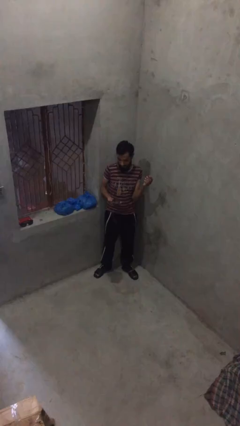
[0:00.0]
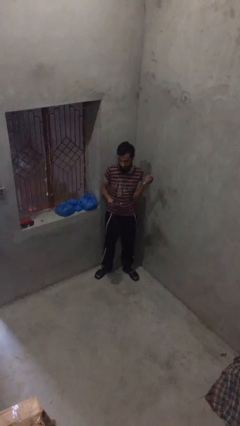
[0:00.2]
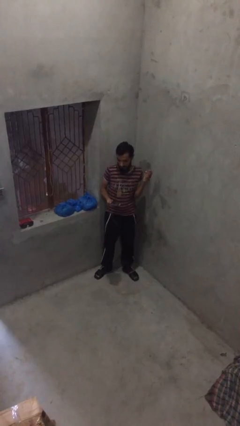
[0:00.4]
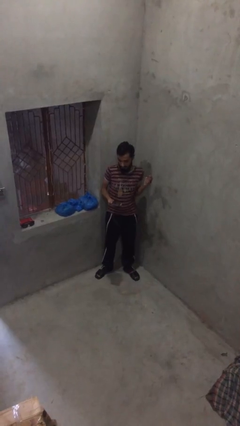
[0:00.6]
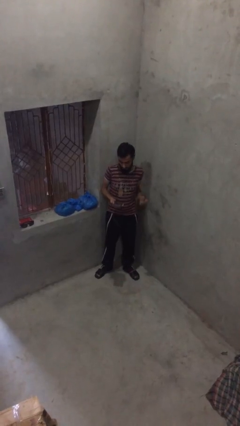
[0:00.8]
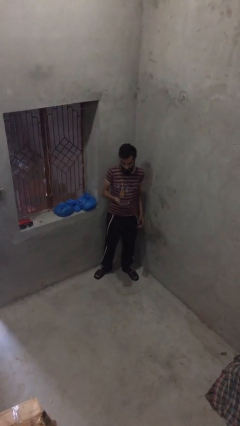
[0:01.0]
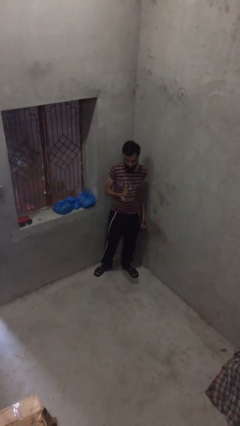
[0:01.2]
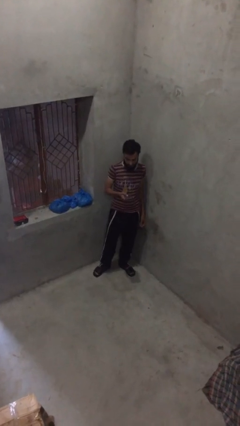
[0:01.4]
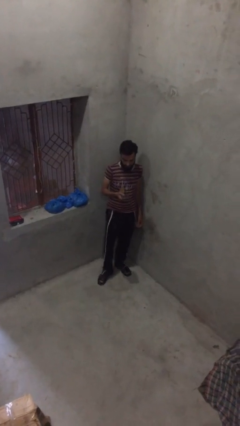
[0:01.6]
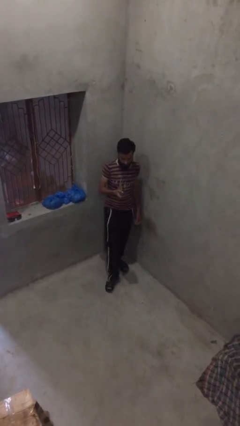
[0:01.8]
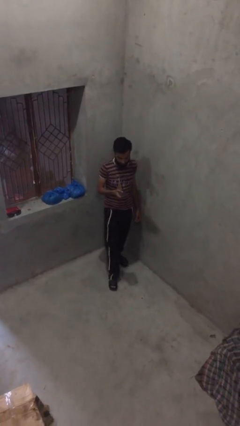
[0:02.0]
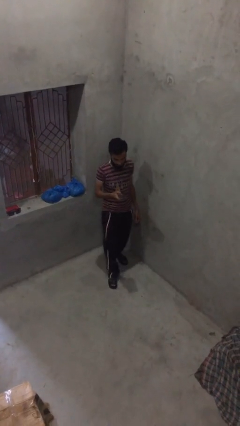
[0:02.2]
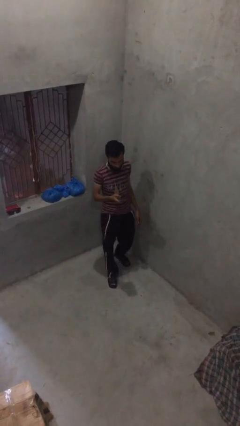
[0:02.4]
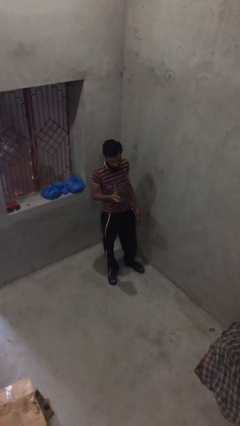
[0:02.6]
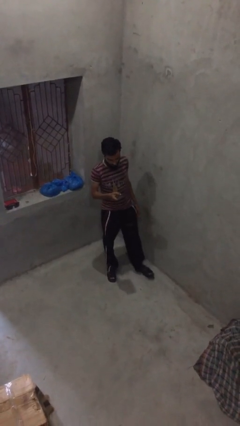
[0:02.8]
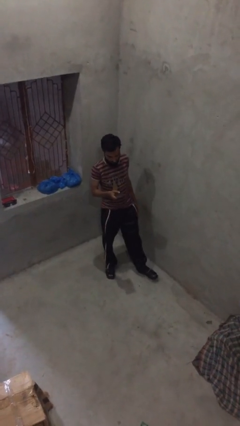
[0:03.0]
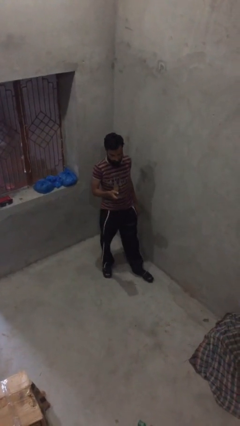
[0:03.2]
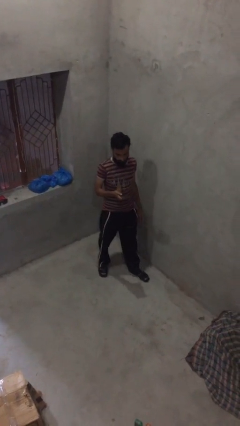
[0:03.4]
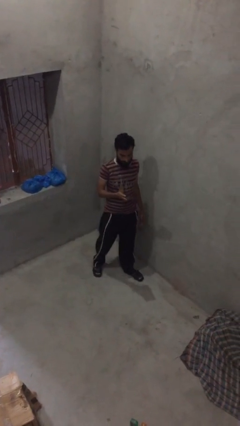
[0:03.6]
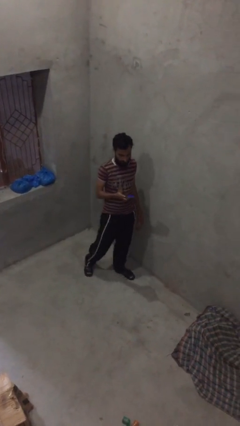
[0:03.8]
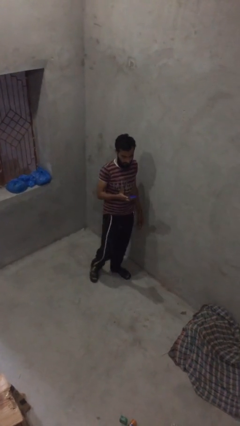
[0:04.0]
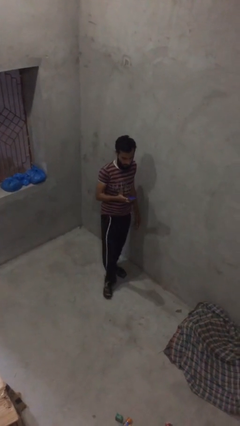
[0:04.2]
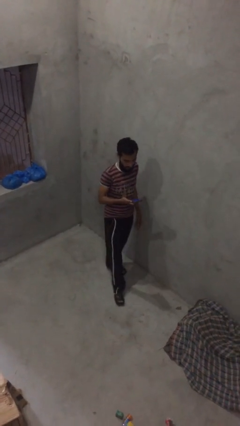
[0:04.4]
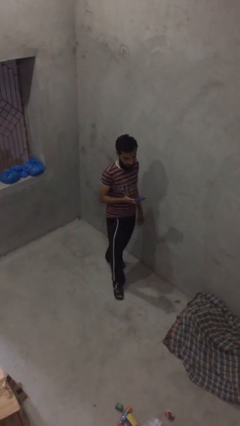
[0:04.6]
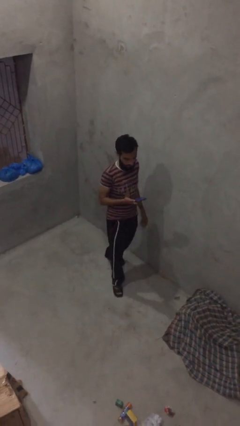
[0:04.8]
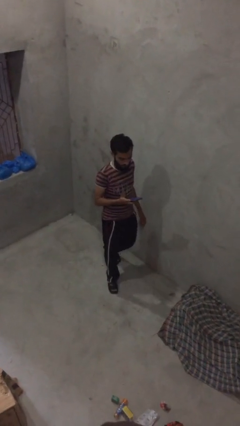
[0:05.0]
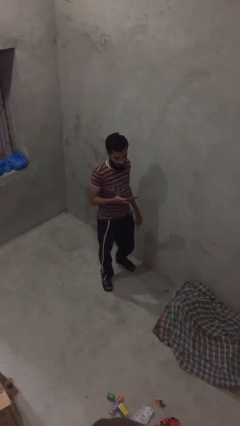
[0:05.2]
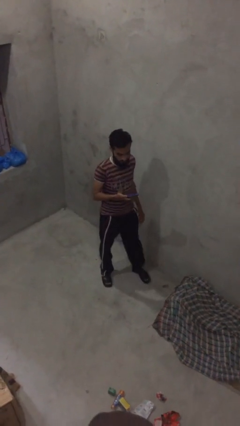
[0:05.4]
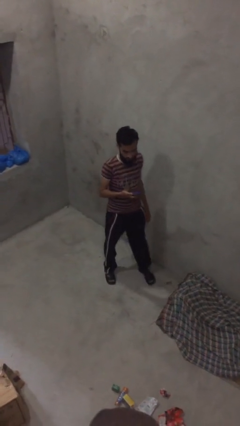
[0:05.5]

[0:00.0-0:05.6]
person texts on phone

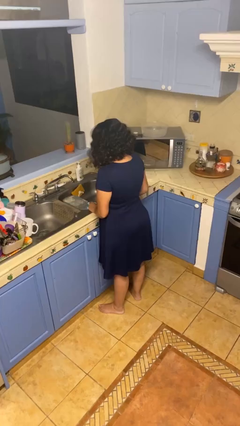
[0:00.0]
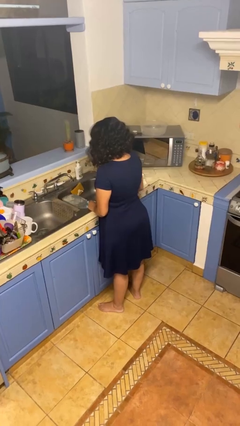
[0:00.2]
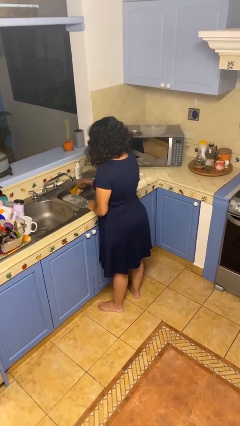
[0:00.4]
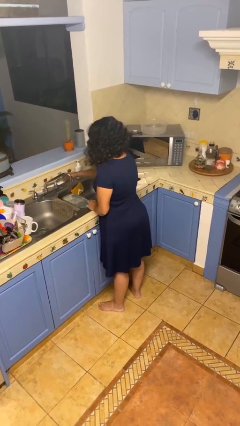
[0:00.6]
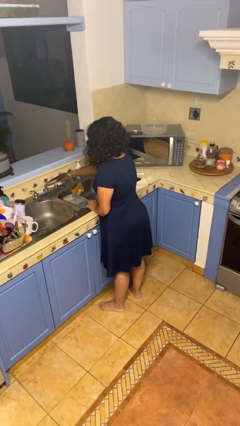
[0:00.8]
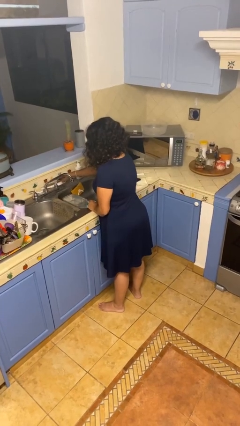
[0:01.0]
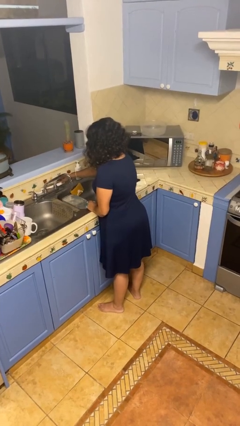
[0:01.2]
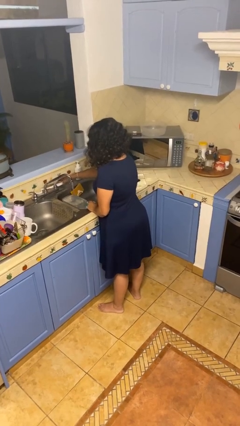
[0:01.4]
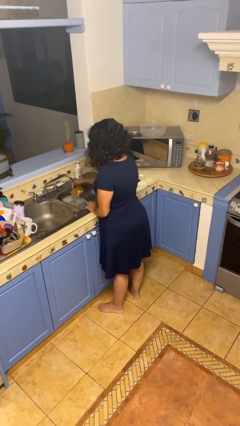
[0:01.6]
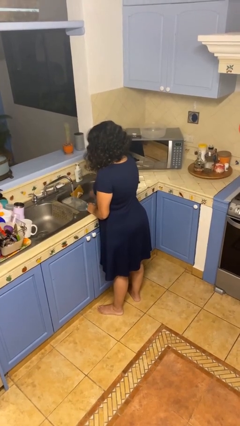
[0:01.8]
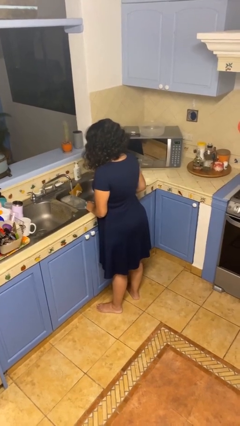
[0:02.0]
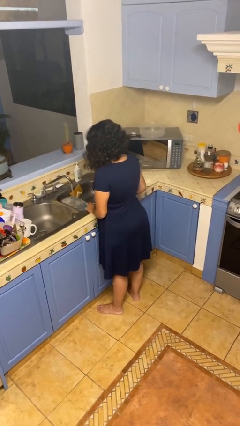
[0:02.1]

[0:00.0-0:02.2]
person turns on faucet

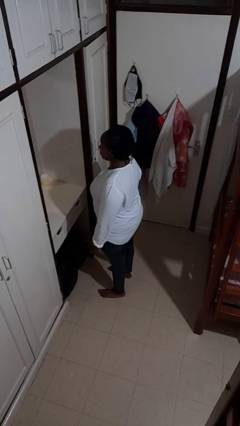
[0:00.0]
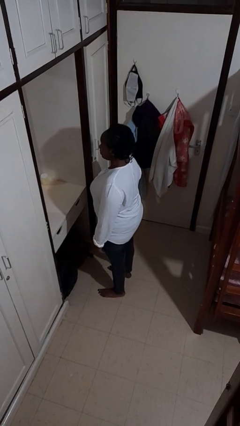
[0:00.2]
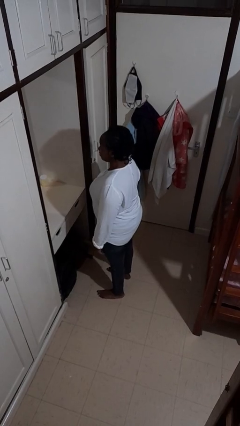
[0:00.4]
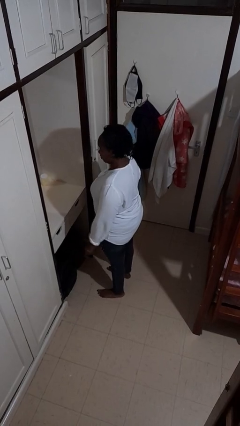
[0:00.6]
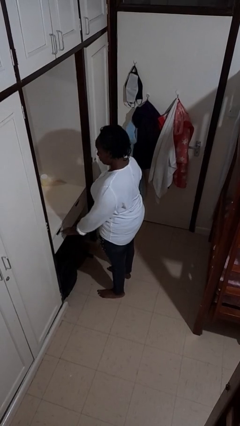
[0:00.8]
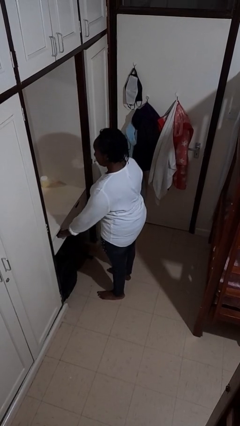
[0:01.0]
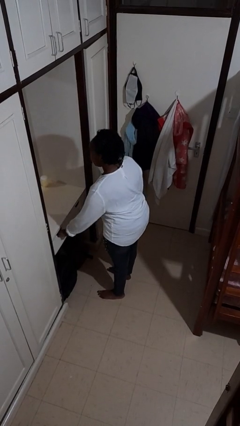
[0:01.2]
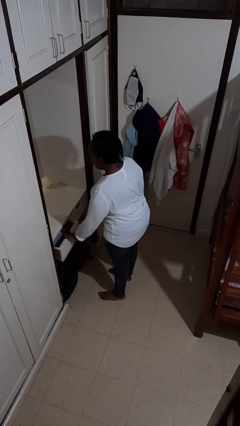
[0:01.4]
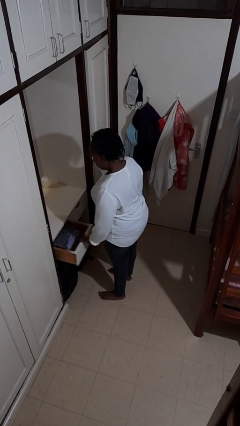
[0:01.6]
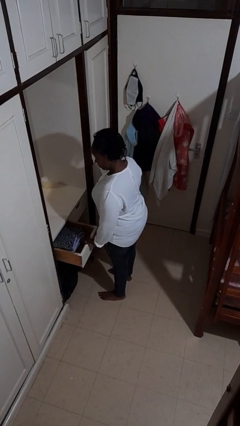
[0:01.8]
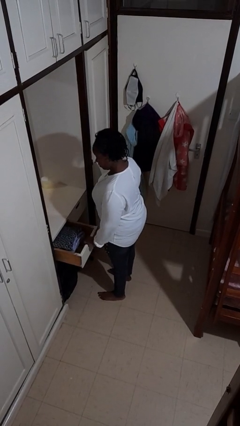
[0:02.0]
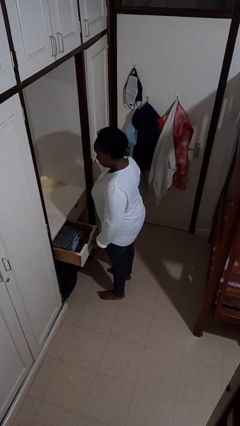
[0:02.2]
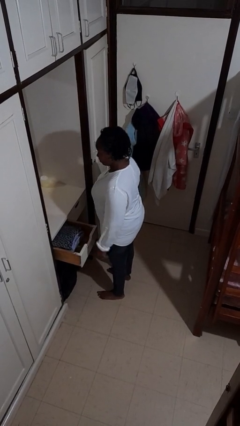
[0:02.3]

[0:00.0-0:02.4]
person opens dresser drawer

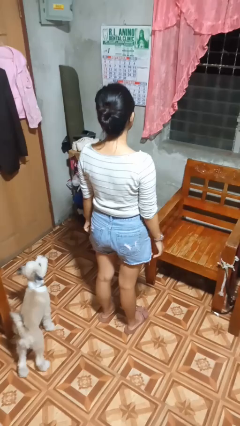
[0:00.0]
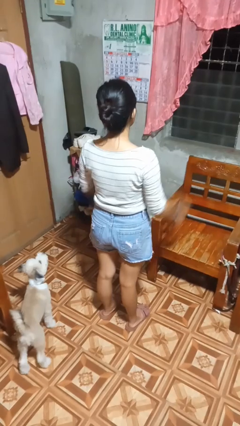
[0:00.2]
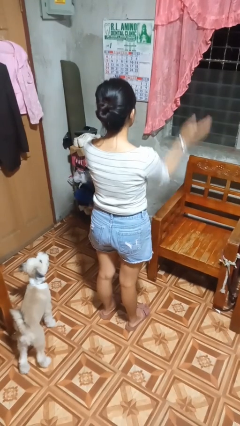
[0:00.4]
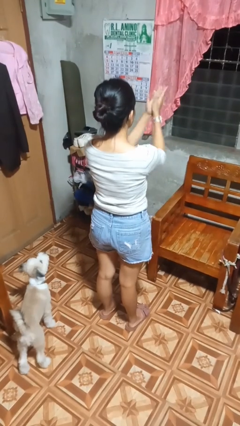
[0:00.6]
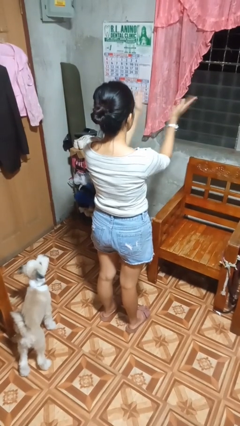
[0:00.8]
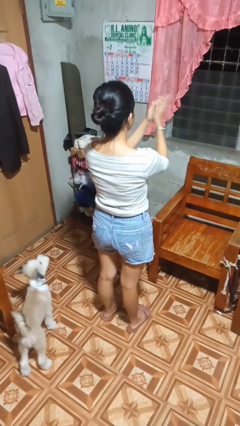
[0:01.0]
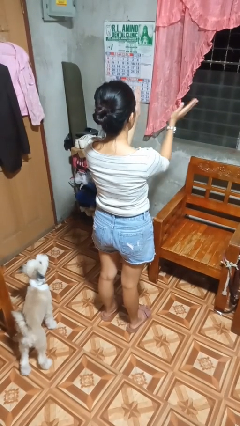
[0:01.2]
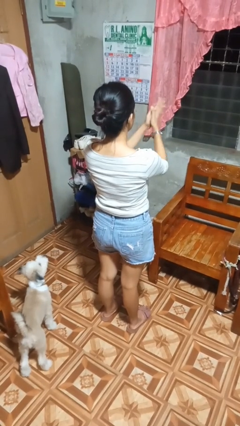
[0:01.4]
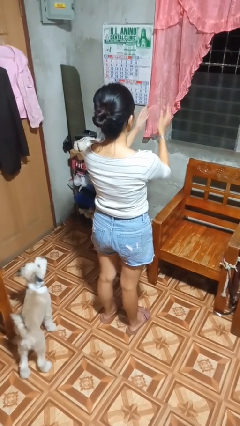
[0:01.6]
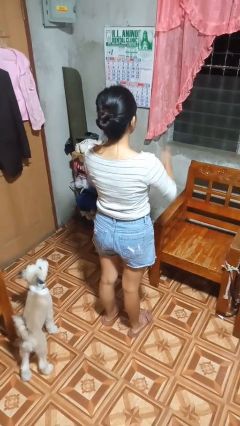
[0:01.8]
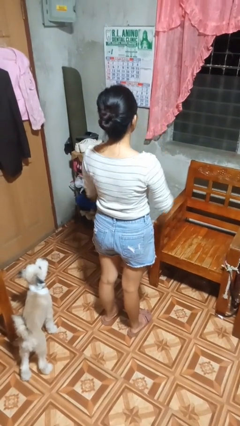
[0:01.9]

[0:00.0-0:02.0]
person claps hands

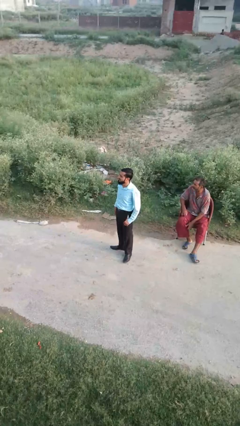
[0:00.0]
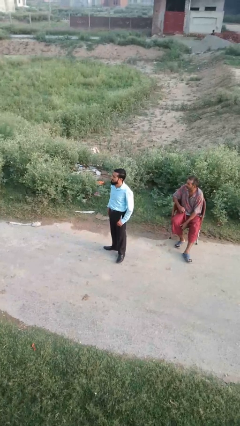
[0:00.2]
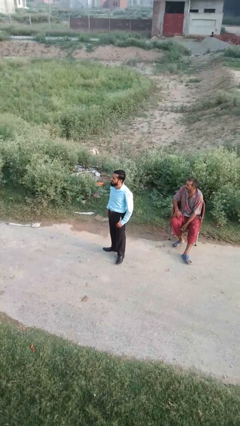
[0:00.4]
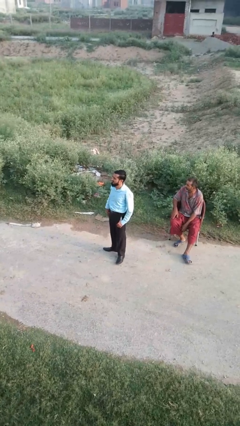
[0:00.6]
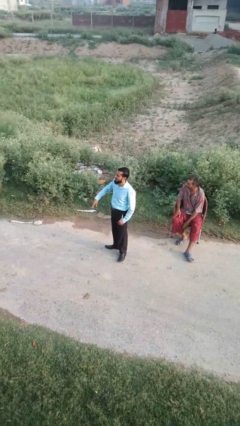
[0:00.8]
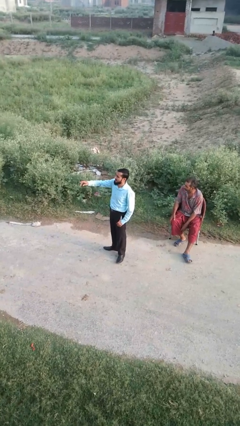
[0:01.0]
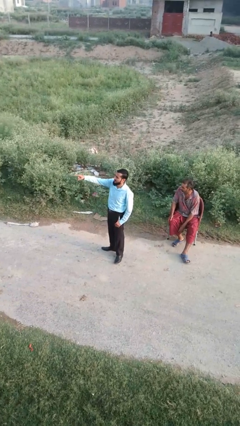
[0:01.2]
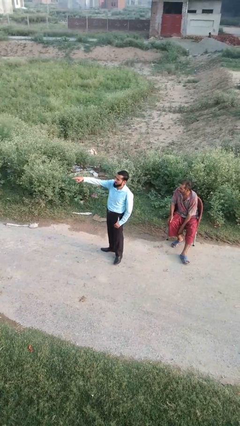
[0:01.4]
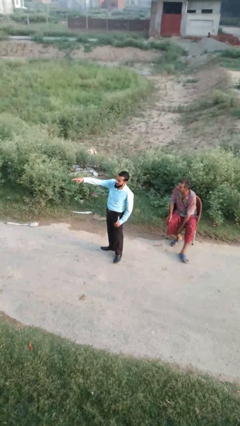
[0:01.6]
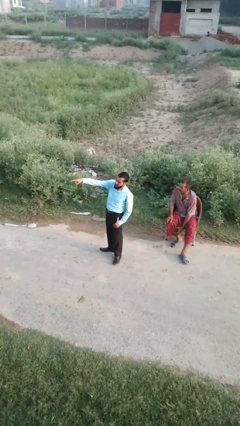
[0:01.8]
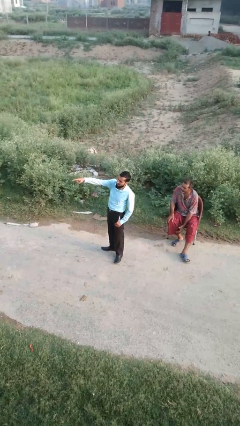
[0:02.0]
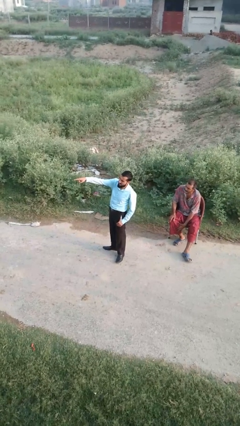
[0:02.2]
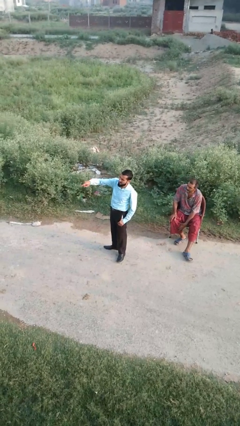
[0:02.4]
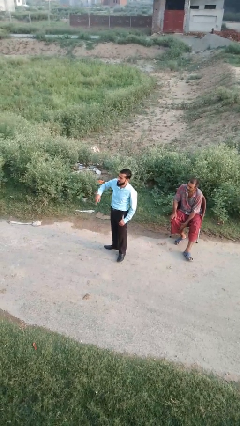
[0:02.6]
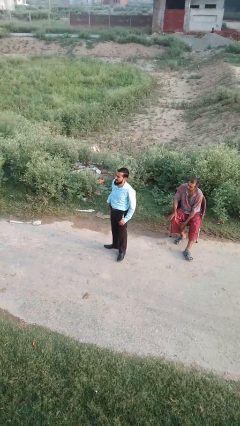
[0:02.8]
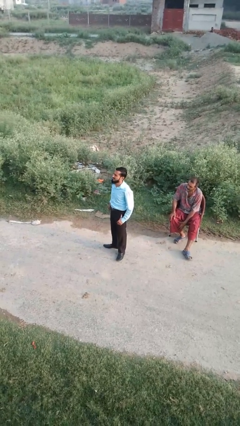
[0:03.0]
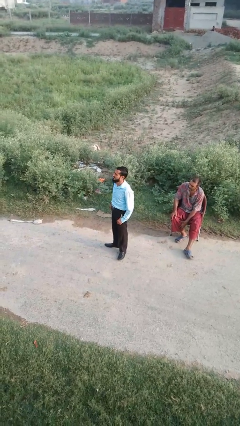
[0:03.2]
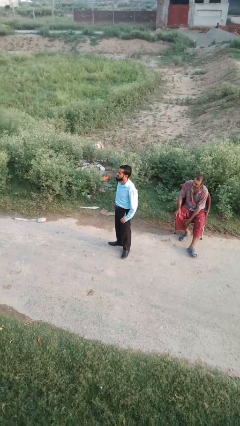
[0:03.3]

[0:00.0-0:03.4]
person points at person

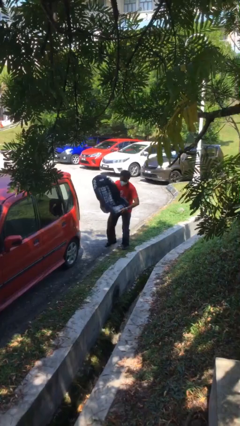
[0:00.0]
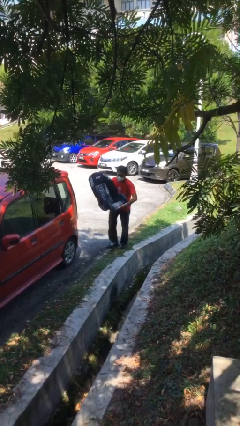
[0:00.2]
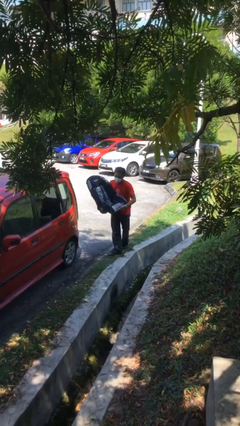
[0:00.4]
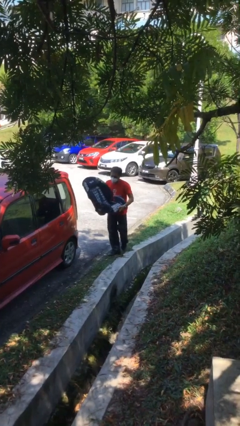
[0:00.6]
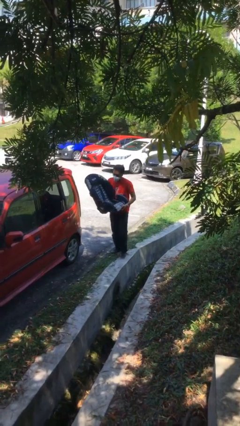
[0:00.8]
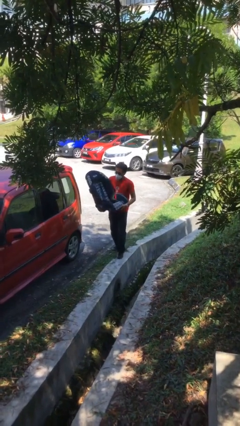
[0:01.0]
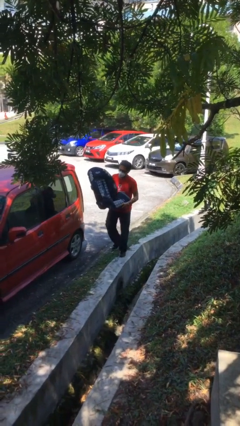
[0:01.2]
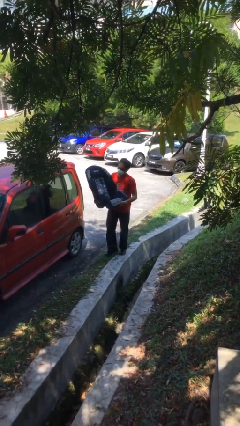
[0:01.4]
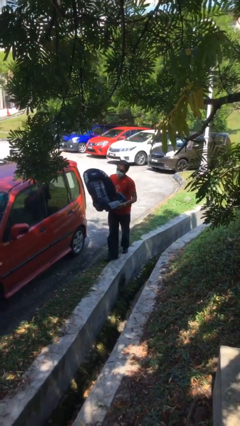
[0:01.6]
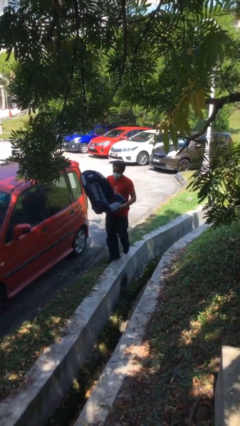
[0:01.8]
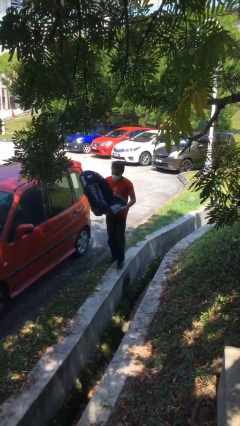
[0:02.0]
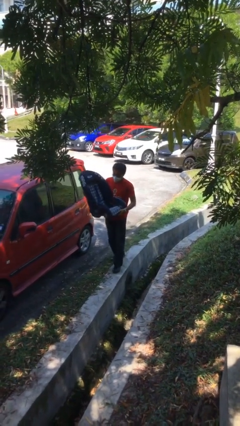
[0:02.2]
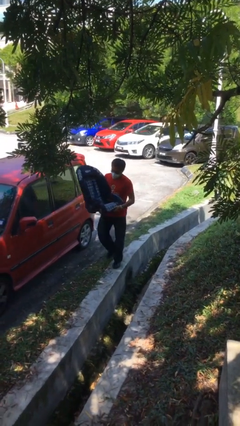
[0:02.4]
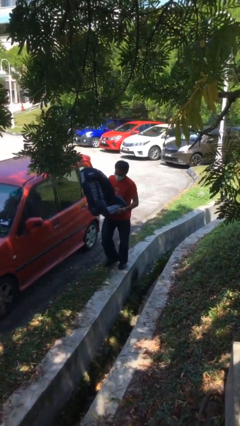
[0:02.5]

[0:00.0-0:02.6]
person carries heavy object
